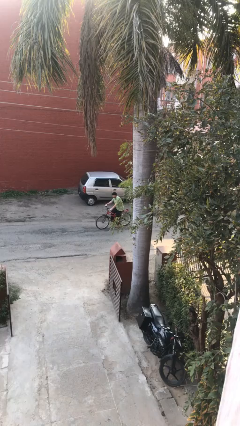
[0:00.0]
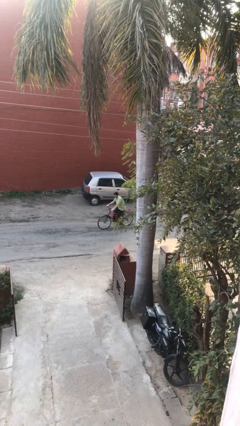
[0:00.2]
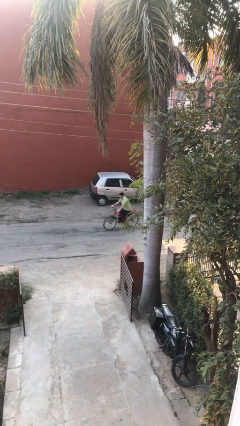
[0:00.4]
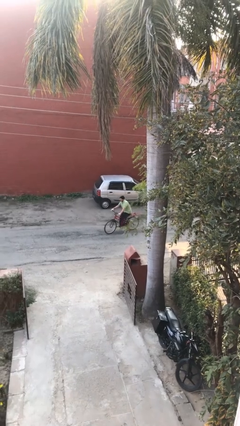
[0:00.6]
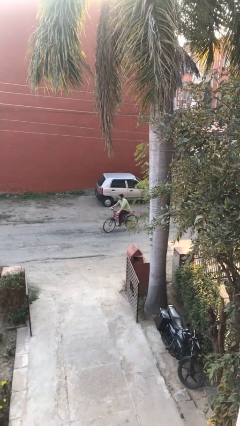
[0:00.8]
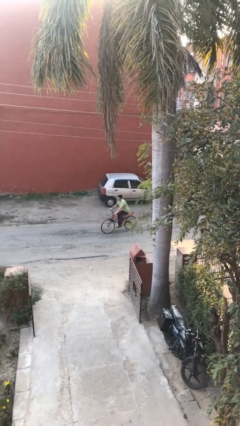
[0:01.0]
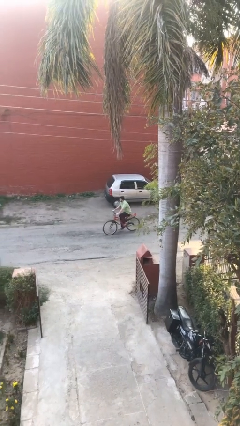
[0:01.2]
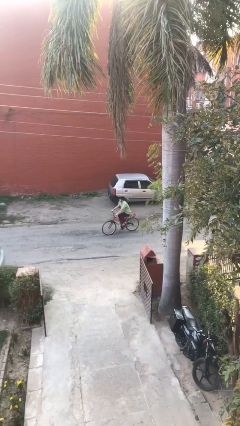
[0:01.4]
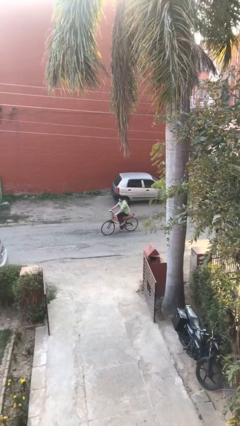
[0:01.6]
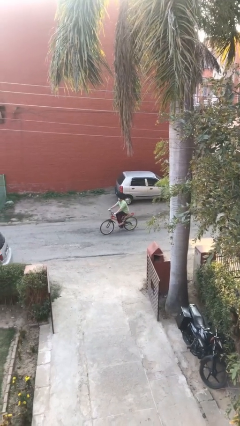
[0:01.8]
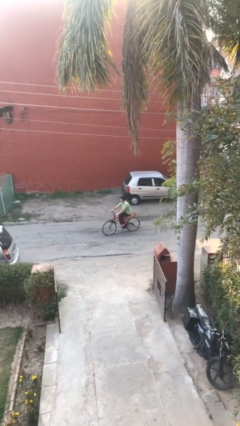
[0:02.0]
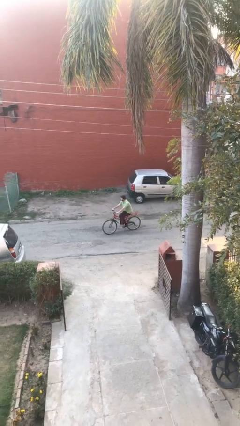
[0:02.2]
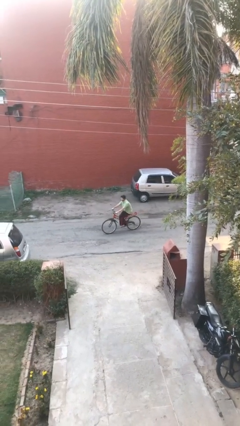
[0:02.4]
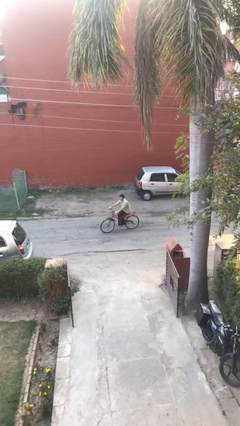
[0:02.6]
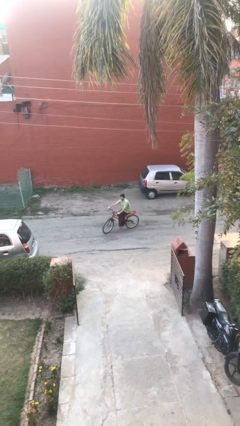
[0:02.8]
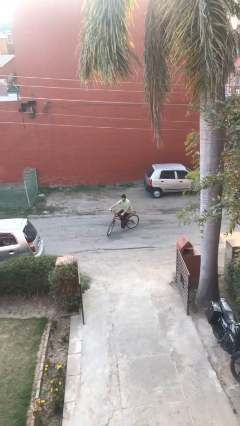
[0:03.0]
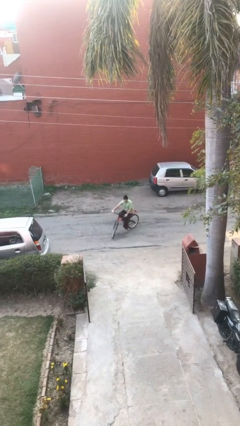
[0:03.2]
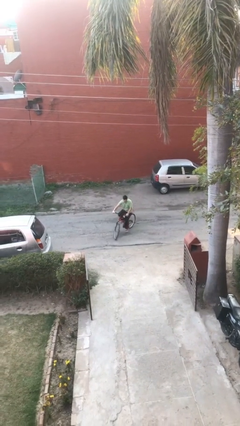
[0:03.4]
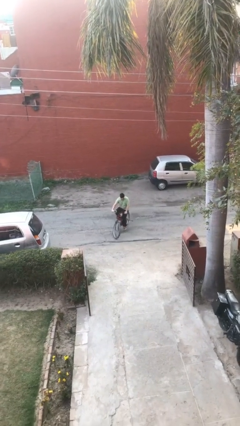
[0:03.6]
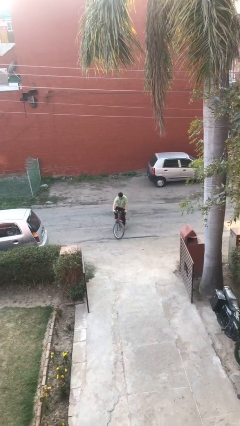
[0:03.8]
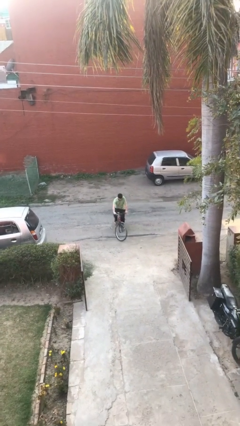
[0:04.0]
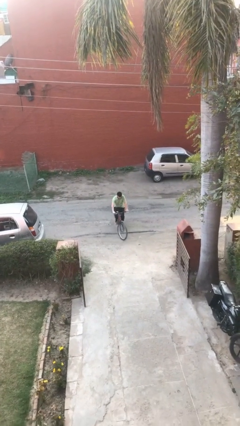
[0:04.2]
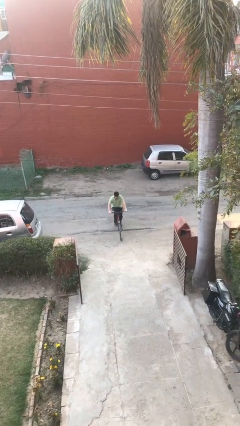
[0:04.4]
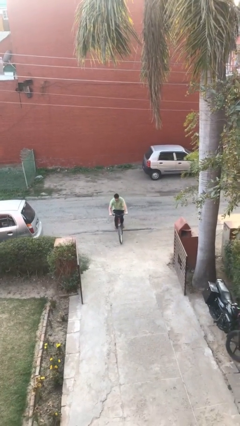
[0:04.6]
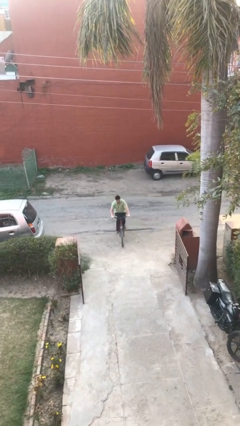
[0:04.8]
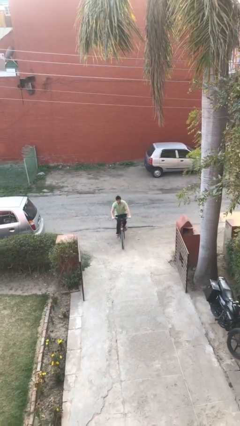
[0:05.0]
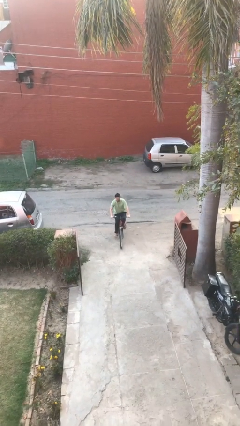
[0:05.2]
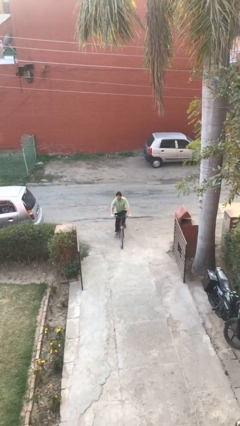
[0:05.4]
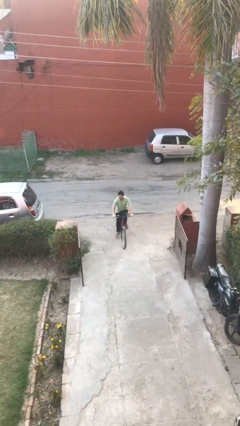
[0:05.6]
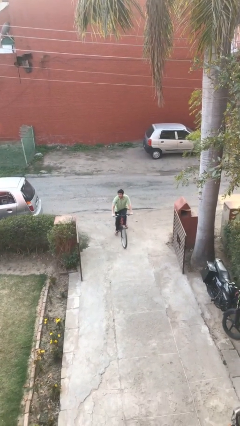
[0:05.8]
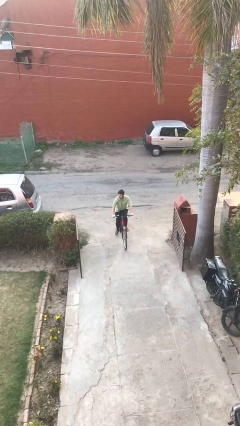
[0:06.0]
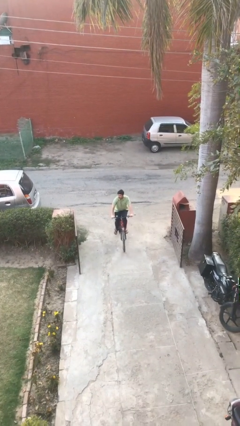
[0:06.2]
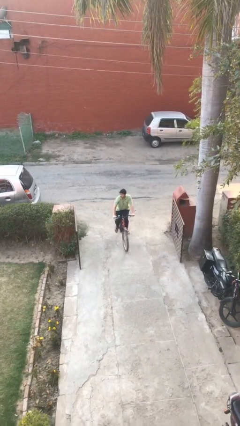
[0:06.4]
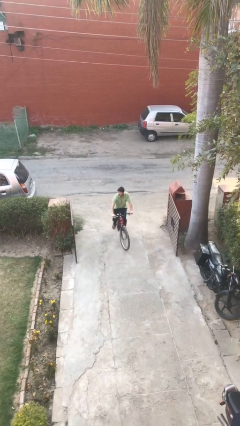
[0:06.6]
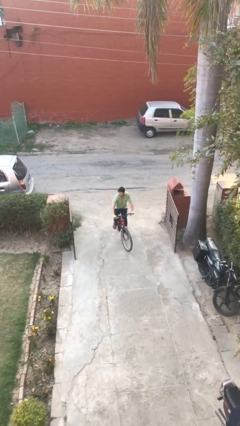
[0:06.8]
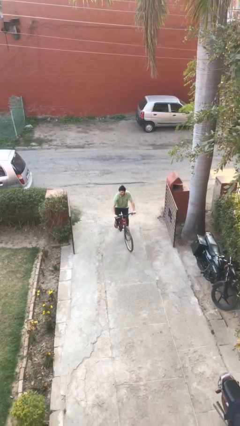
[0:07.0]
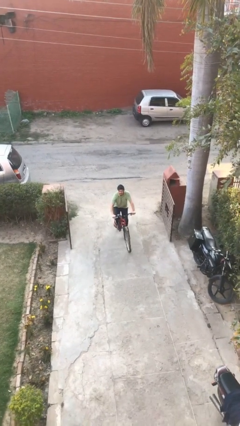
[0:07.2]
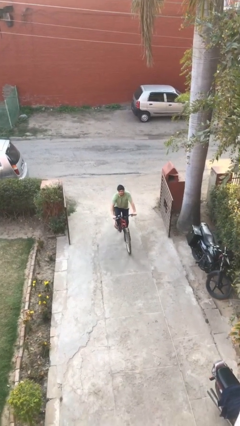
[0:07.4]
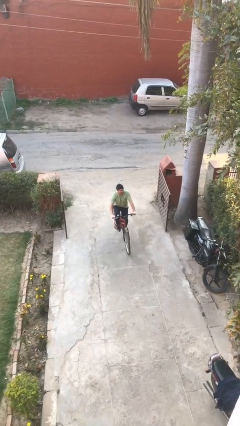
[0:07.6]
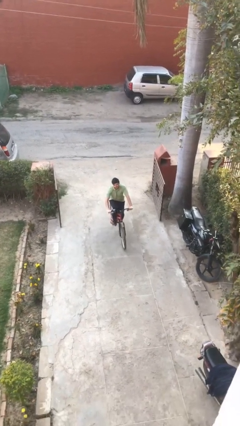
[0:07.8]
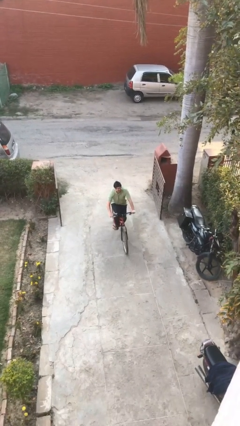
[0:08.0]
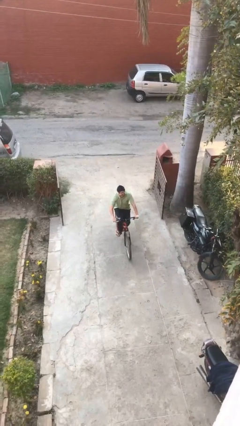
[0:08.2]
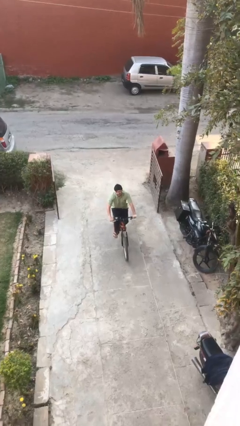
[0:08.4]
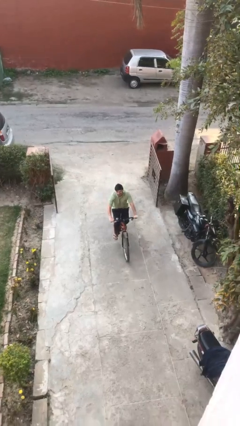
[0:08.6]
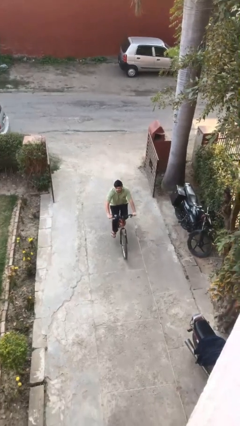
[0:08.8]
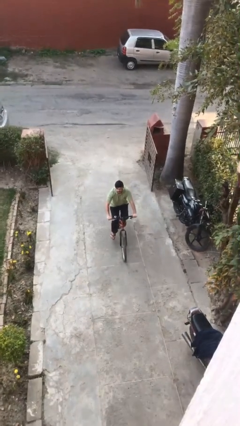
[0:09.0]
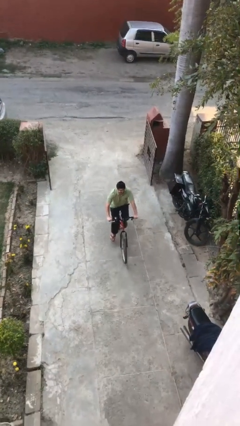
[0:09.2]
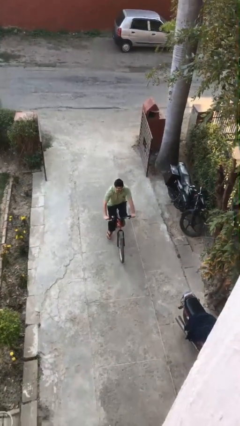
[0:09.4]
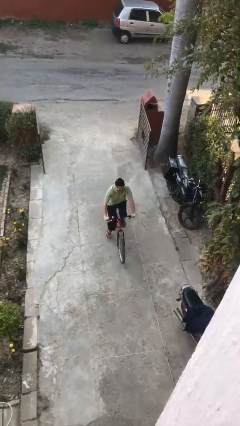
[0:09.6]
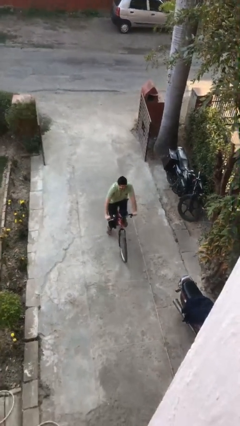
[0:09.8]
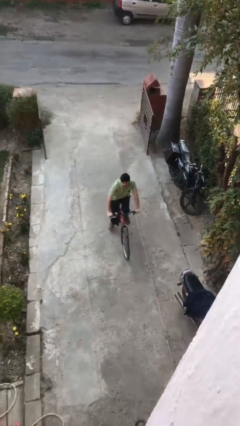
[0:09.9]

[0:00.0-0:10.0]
person rides bicycle

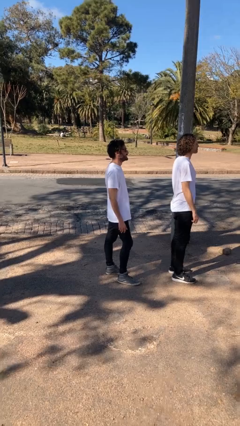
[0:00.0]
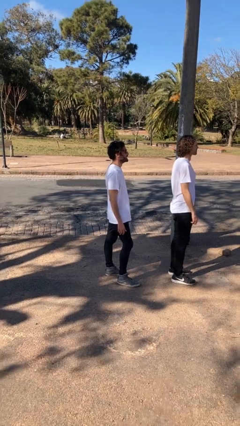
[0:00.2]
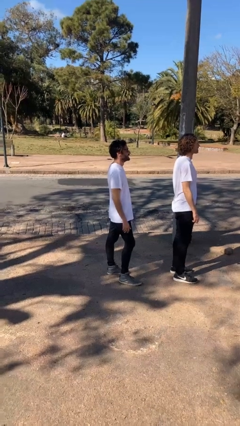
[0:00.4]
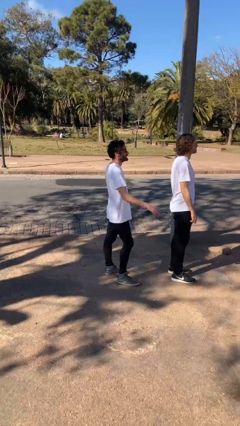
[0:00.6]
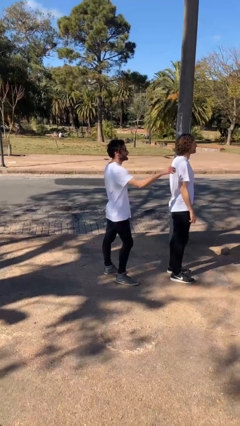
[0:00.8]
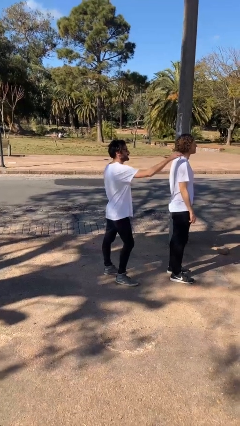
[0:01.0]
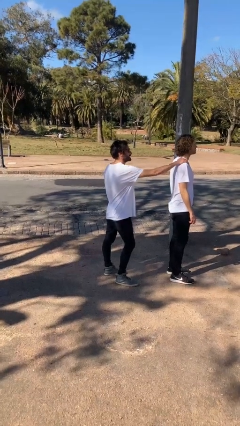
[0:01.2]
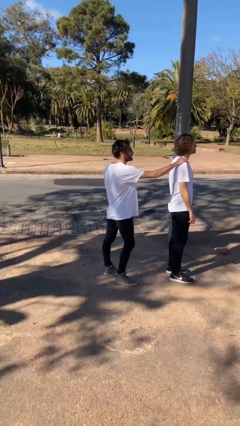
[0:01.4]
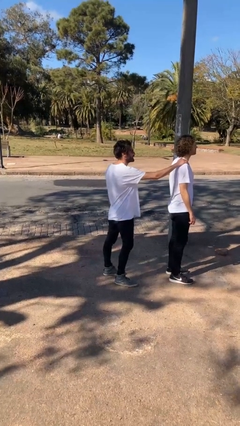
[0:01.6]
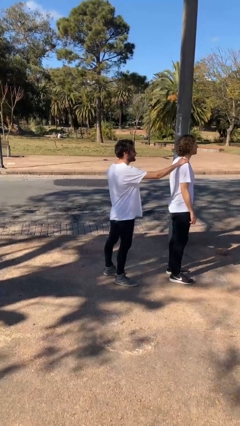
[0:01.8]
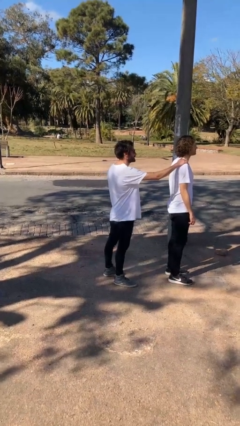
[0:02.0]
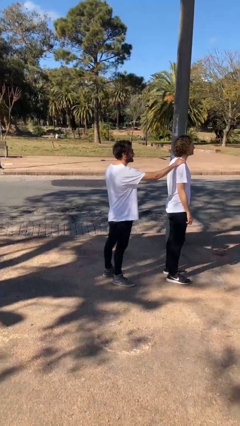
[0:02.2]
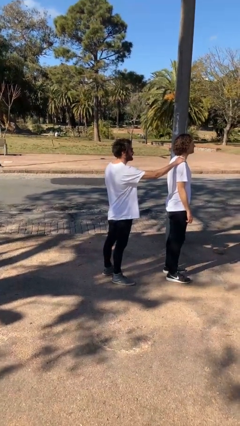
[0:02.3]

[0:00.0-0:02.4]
person grabs person by shoulder

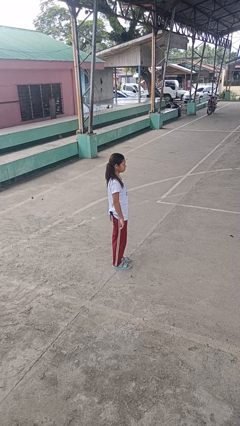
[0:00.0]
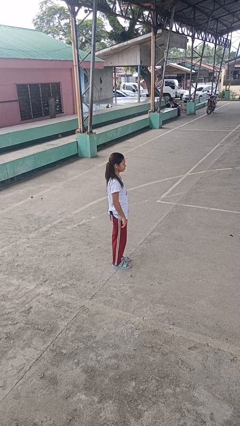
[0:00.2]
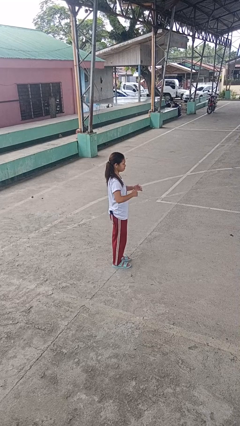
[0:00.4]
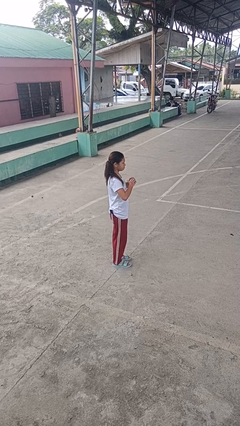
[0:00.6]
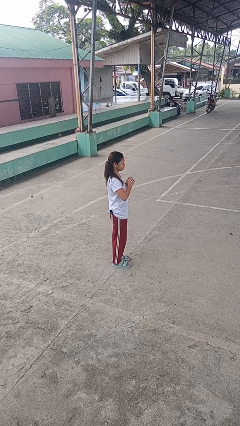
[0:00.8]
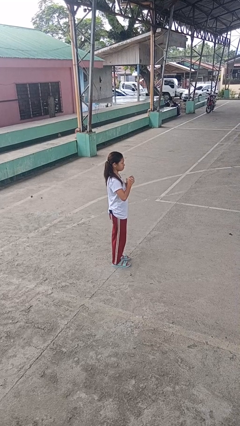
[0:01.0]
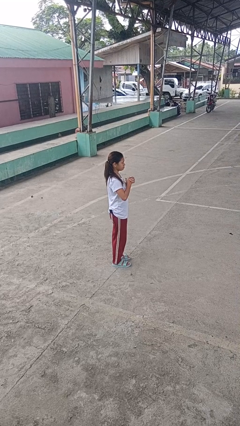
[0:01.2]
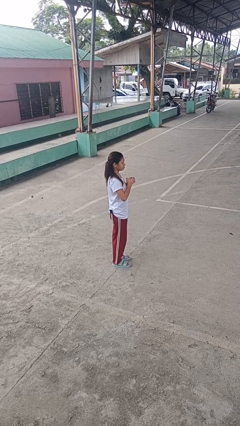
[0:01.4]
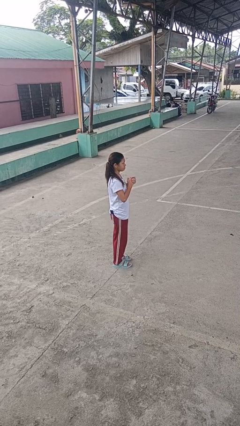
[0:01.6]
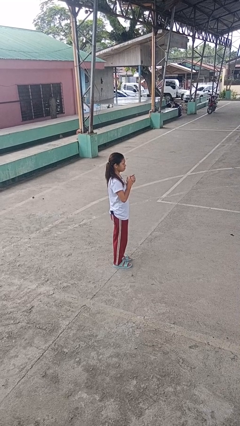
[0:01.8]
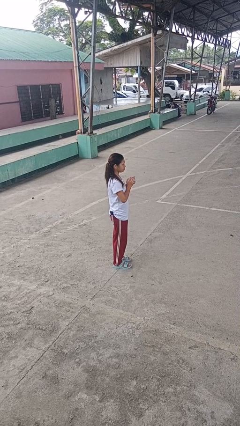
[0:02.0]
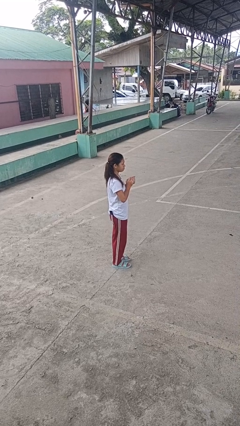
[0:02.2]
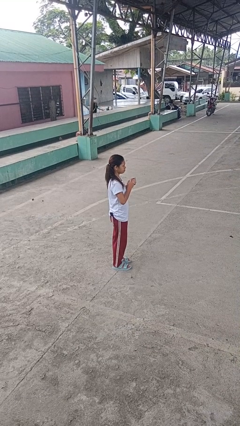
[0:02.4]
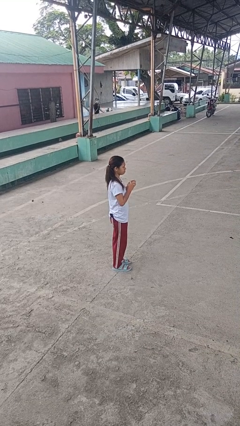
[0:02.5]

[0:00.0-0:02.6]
person cracks knuckles

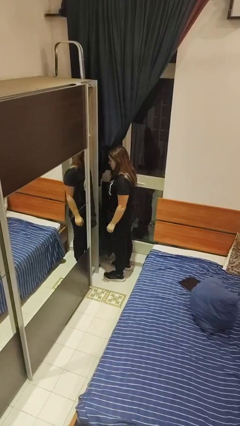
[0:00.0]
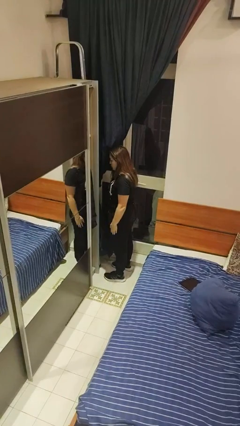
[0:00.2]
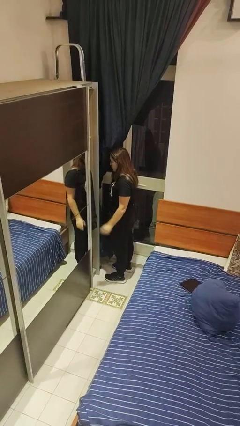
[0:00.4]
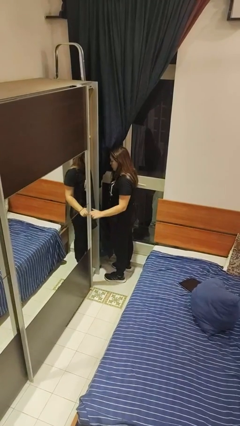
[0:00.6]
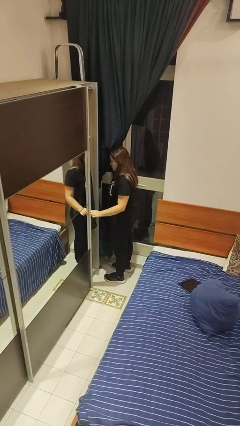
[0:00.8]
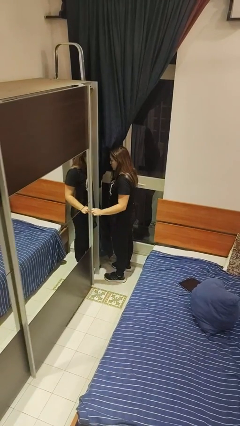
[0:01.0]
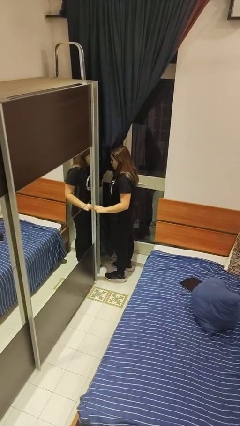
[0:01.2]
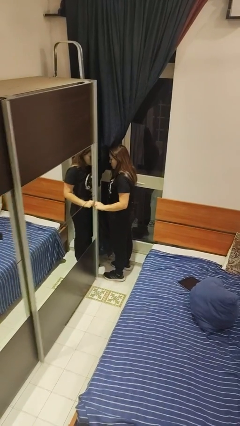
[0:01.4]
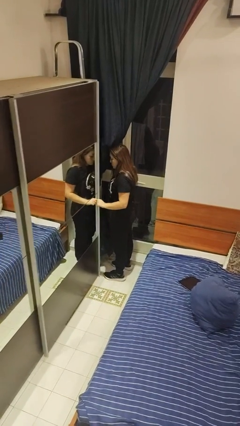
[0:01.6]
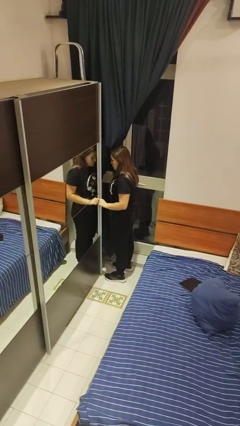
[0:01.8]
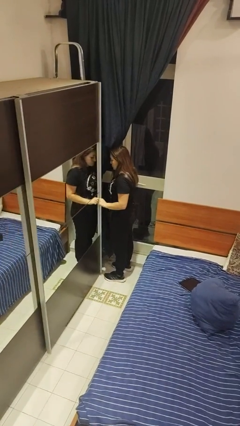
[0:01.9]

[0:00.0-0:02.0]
person closes closet door

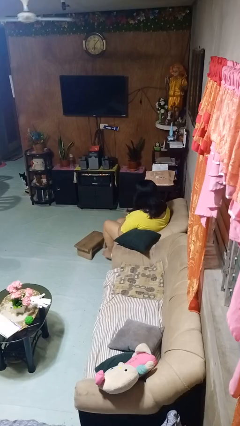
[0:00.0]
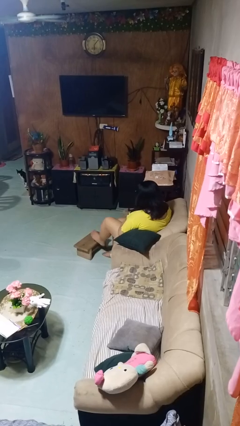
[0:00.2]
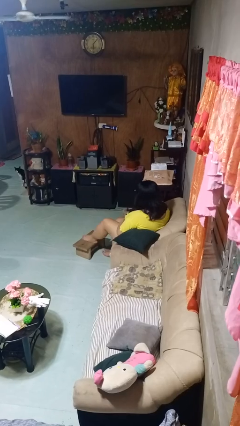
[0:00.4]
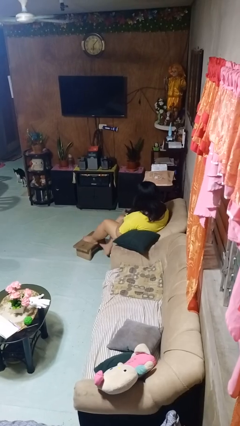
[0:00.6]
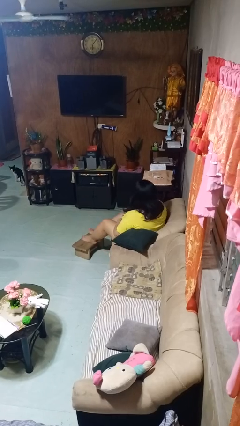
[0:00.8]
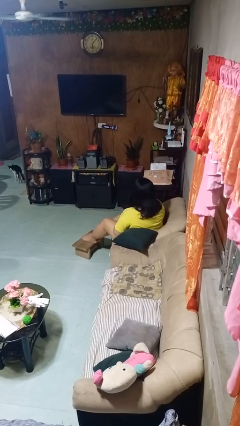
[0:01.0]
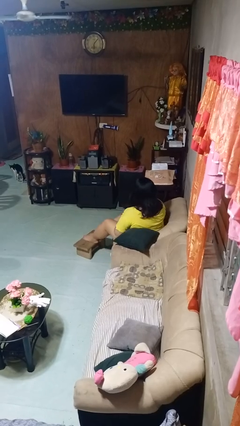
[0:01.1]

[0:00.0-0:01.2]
person puts feet up
